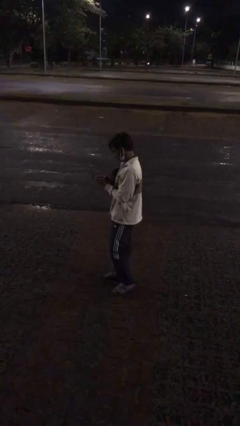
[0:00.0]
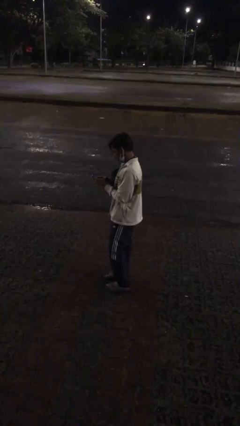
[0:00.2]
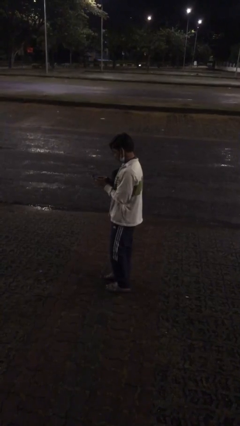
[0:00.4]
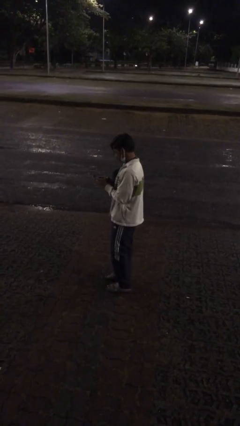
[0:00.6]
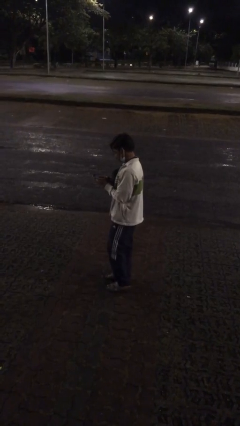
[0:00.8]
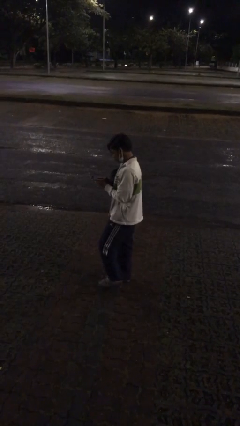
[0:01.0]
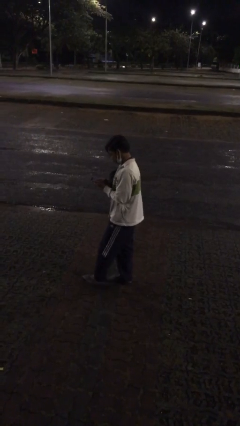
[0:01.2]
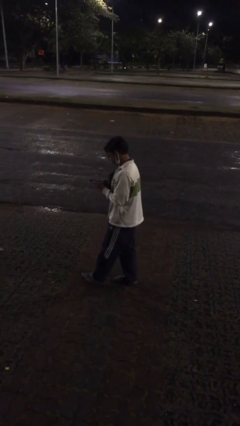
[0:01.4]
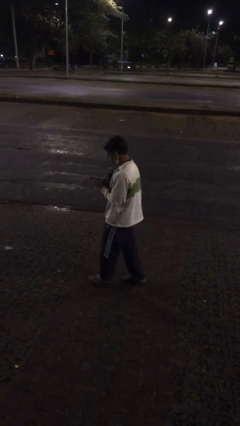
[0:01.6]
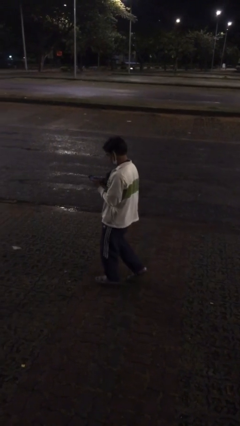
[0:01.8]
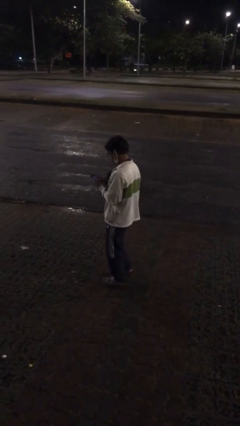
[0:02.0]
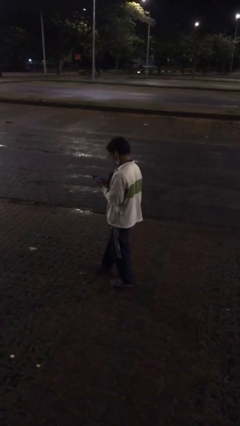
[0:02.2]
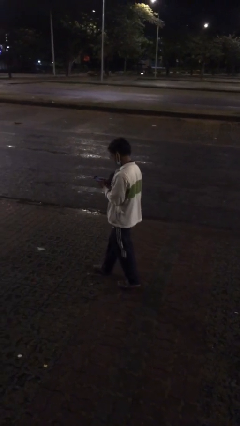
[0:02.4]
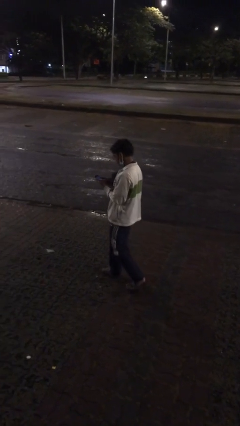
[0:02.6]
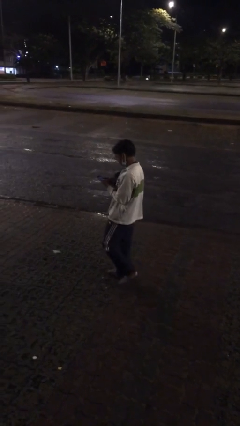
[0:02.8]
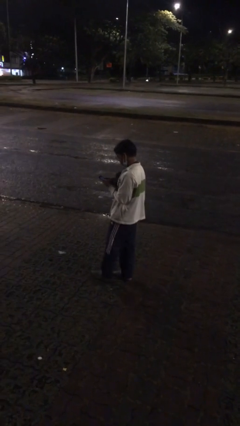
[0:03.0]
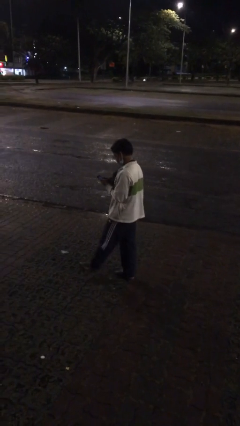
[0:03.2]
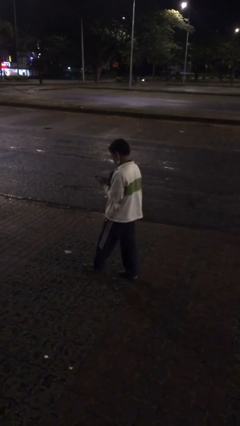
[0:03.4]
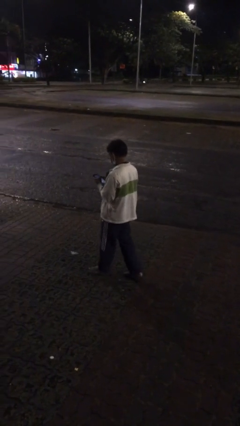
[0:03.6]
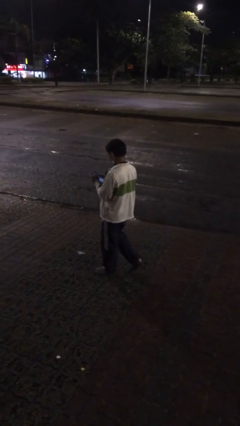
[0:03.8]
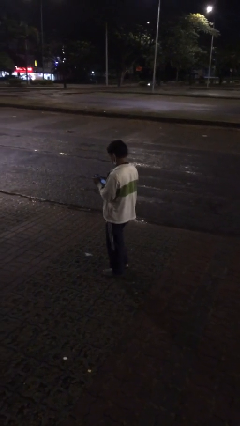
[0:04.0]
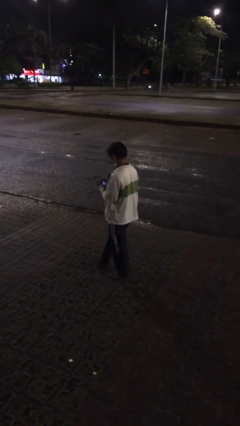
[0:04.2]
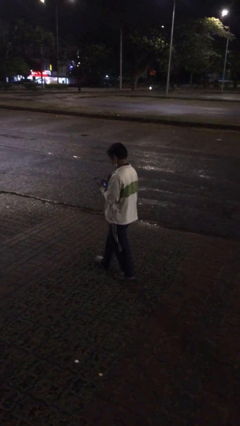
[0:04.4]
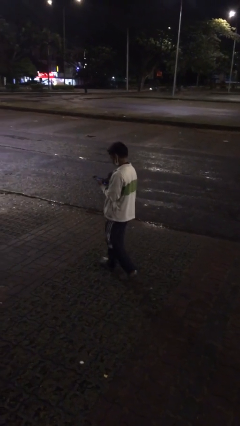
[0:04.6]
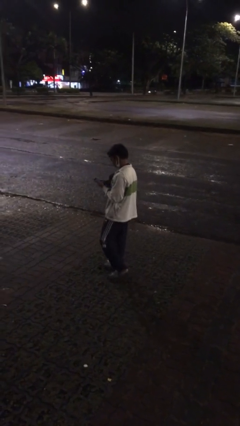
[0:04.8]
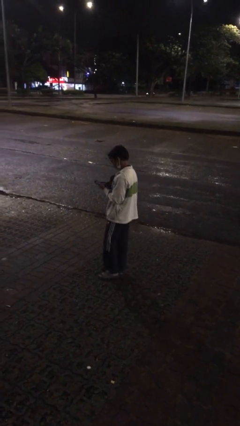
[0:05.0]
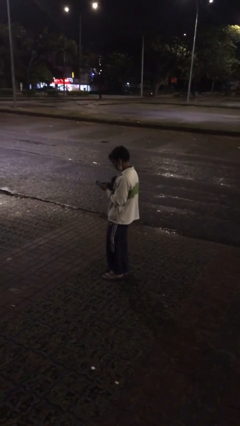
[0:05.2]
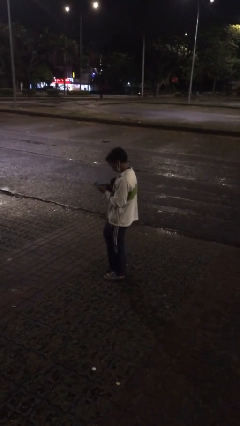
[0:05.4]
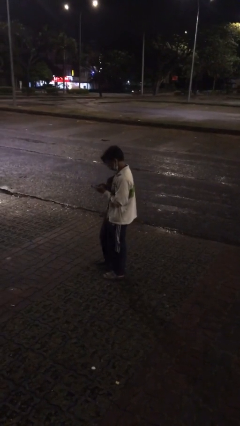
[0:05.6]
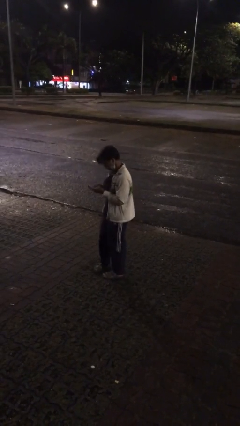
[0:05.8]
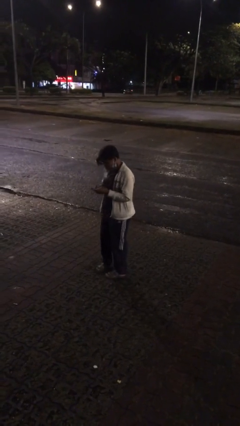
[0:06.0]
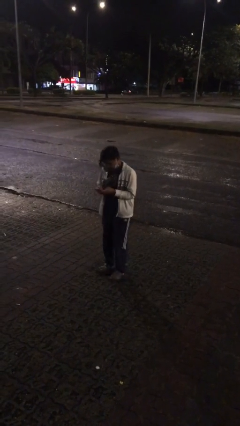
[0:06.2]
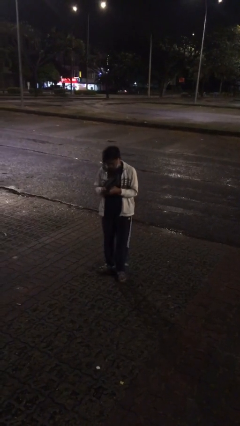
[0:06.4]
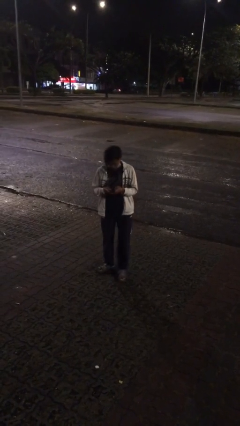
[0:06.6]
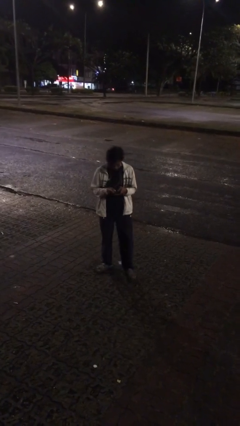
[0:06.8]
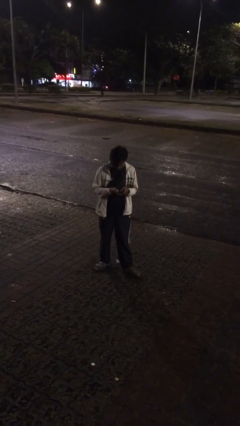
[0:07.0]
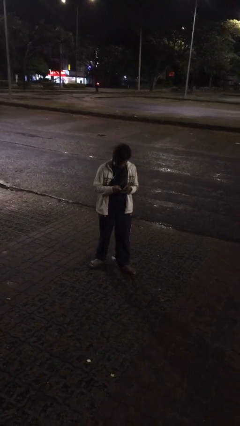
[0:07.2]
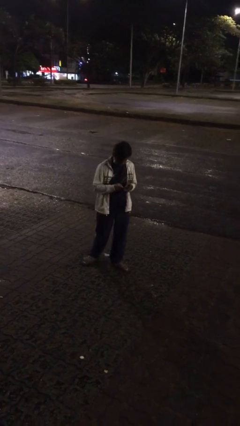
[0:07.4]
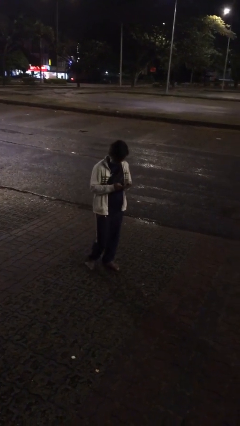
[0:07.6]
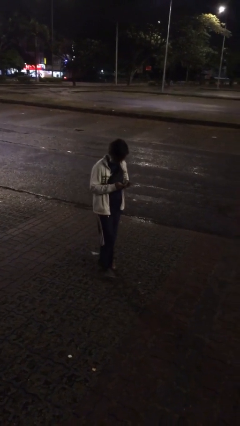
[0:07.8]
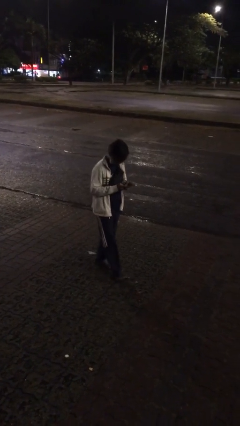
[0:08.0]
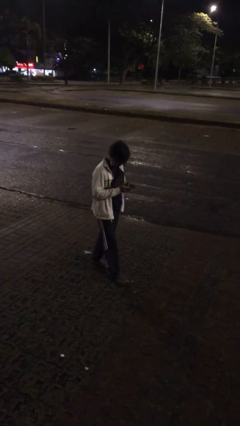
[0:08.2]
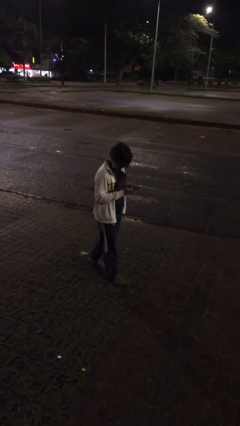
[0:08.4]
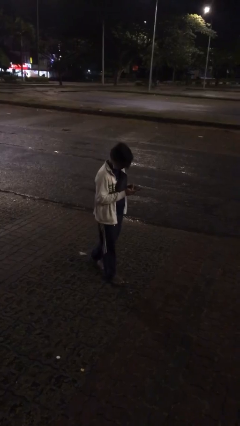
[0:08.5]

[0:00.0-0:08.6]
person texts on phone

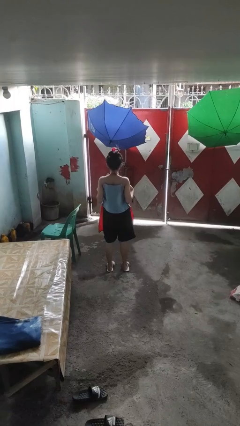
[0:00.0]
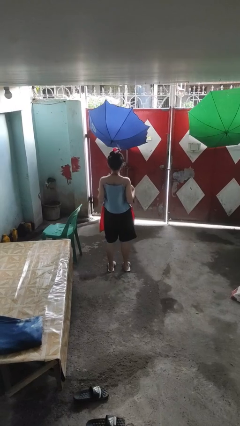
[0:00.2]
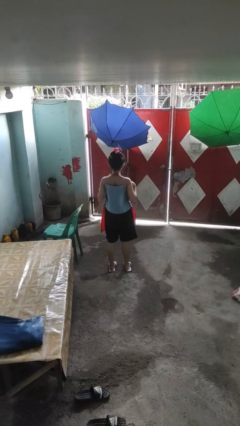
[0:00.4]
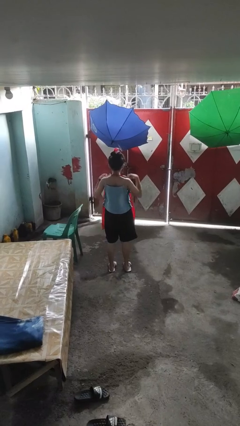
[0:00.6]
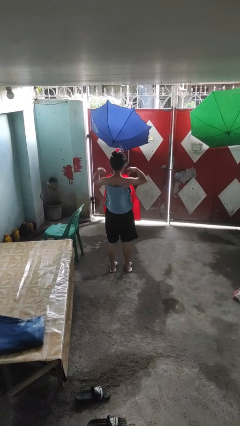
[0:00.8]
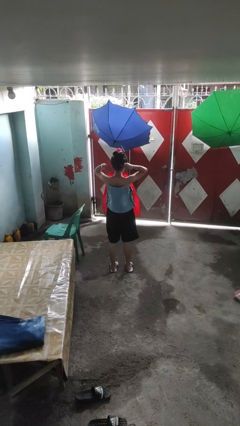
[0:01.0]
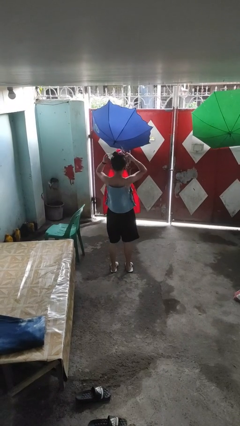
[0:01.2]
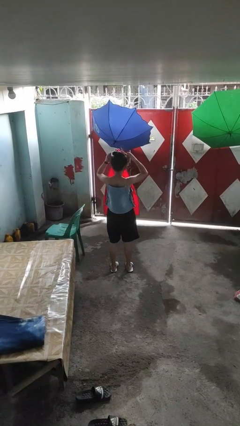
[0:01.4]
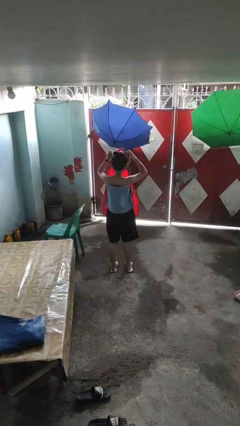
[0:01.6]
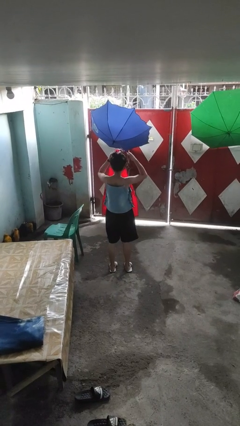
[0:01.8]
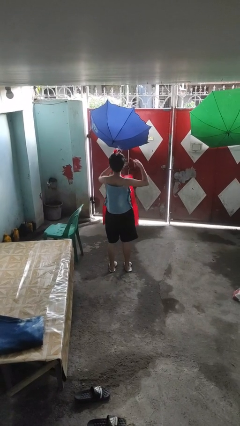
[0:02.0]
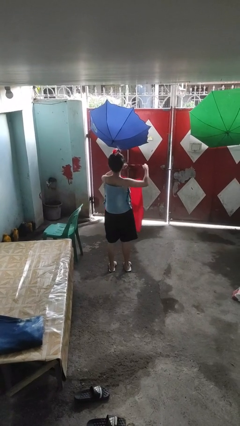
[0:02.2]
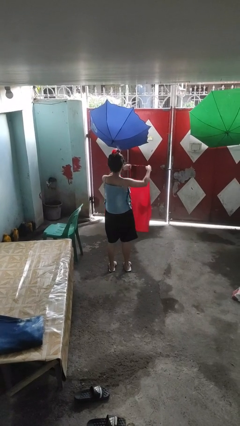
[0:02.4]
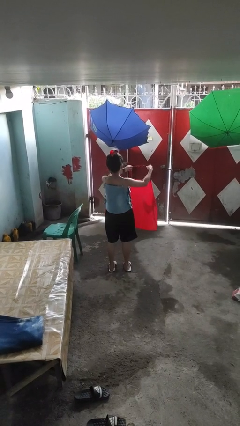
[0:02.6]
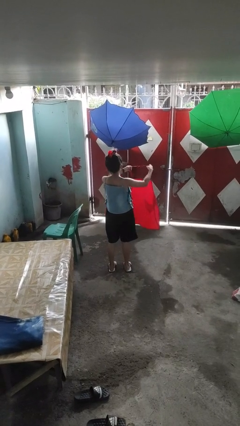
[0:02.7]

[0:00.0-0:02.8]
person takes off apron

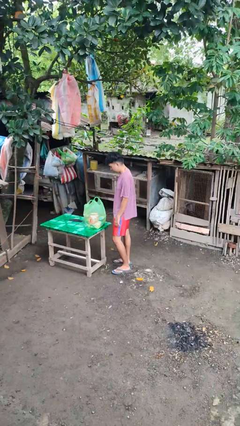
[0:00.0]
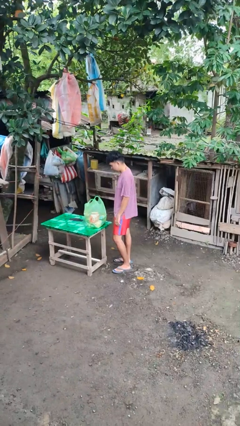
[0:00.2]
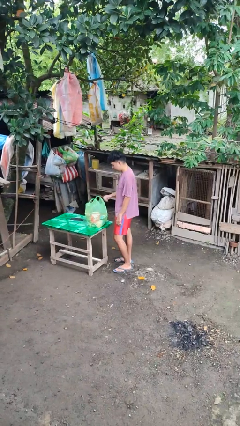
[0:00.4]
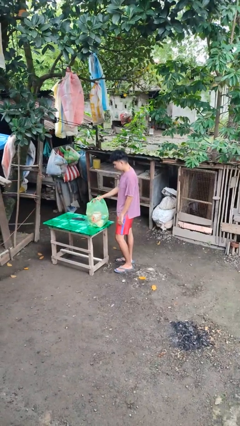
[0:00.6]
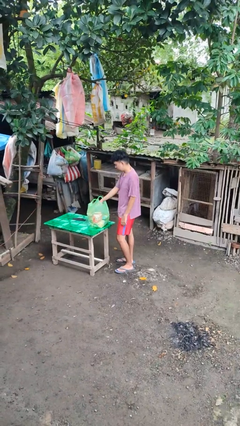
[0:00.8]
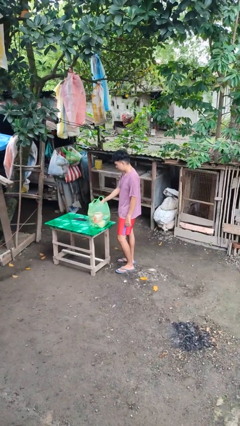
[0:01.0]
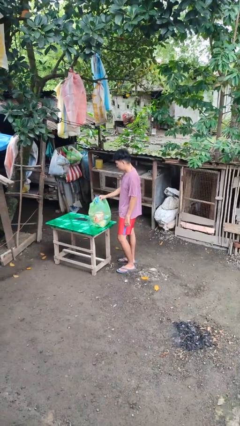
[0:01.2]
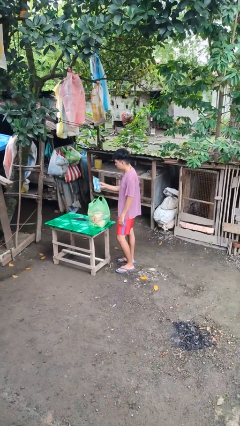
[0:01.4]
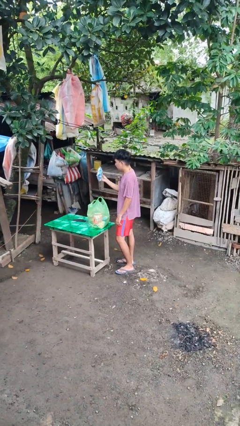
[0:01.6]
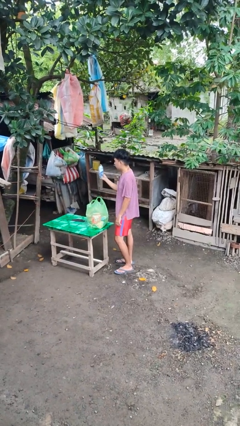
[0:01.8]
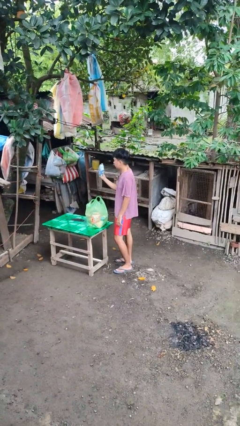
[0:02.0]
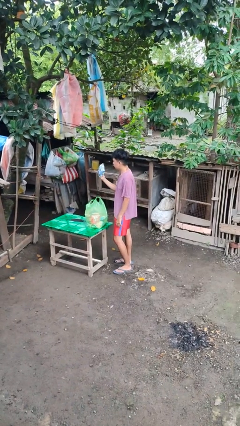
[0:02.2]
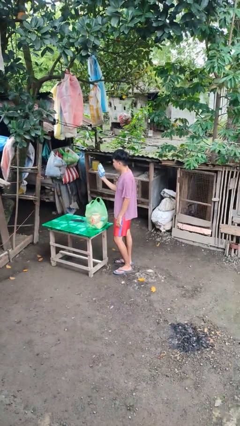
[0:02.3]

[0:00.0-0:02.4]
person takes object from bag

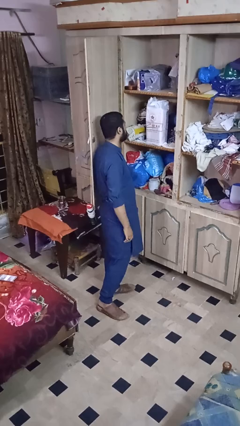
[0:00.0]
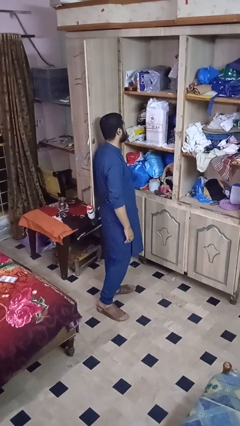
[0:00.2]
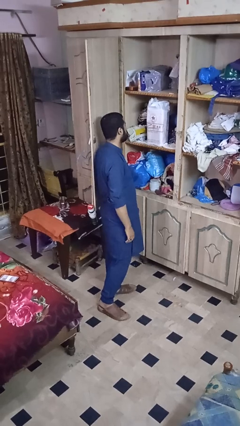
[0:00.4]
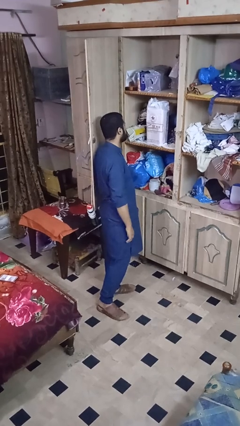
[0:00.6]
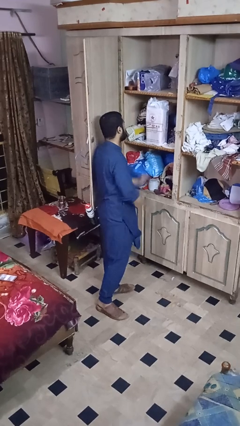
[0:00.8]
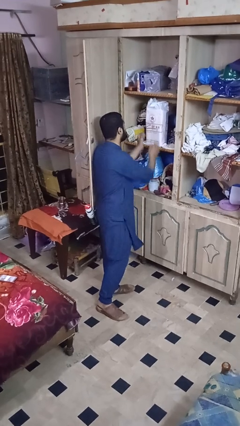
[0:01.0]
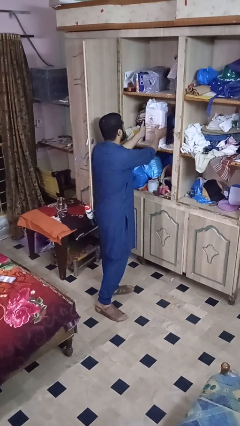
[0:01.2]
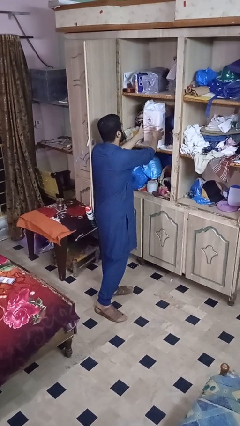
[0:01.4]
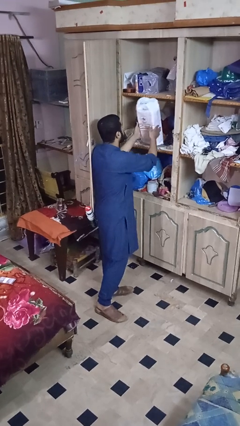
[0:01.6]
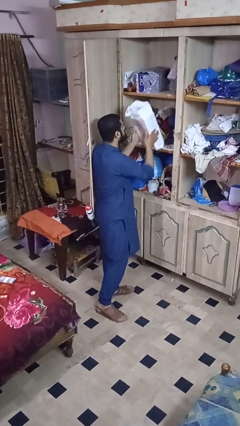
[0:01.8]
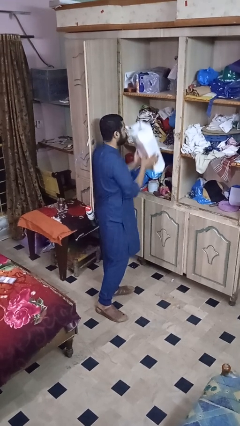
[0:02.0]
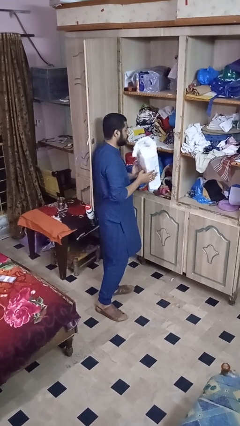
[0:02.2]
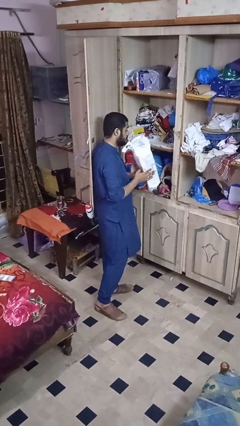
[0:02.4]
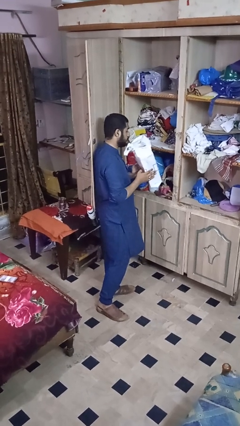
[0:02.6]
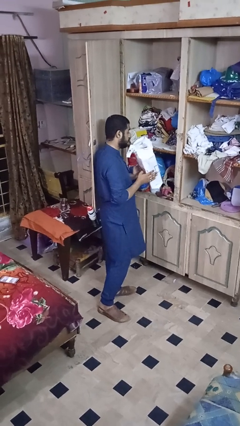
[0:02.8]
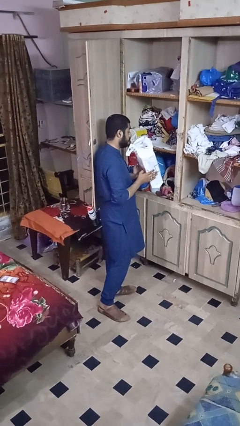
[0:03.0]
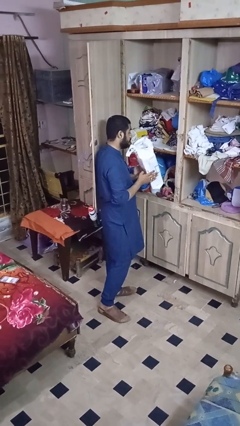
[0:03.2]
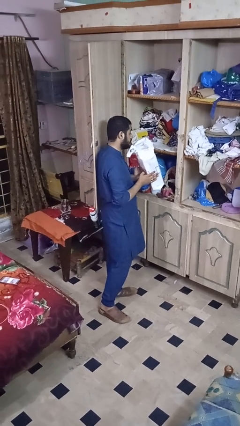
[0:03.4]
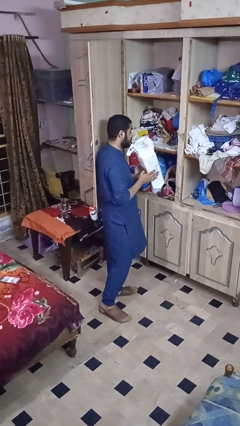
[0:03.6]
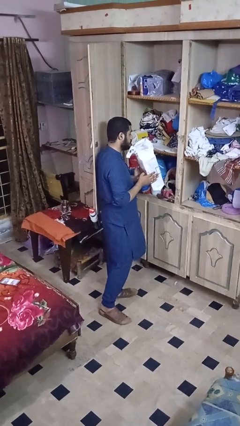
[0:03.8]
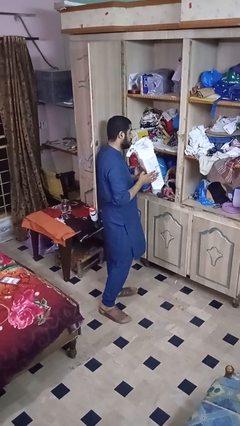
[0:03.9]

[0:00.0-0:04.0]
person picks up object from cabinet
